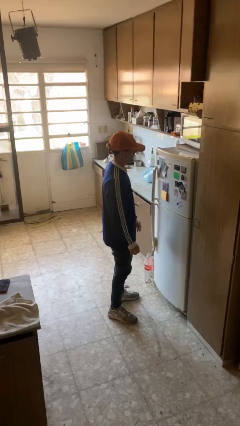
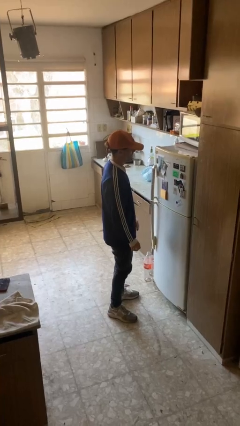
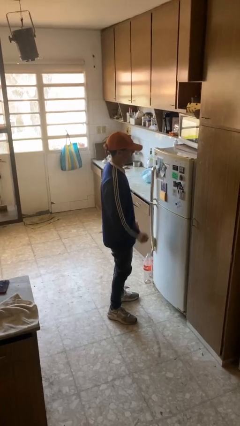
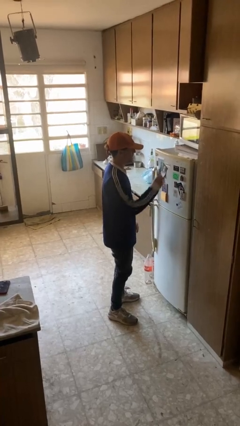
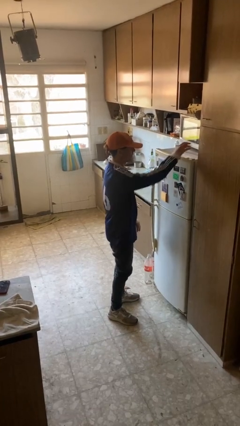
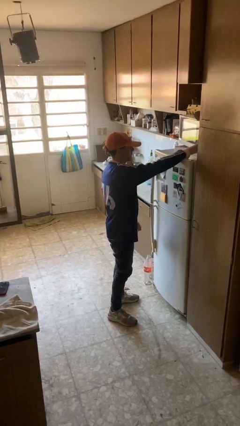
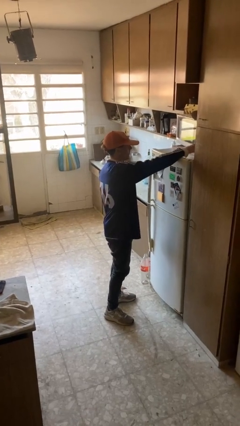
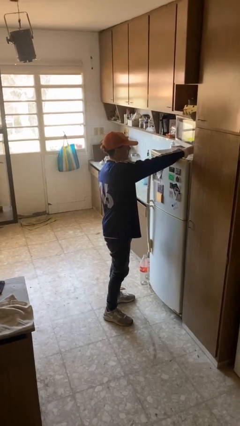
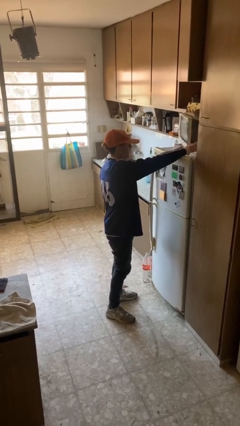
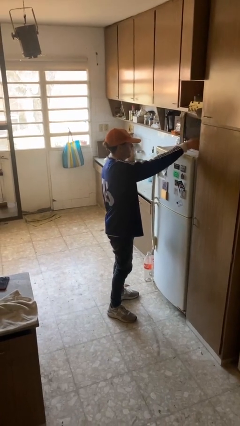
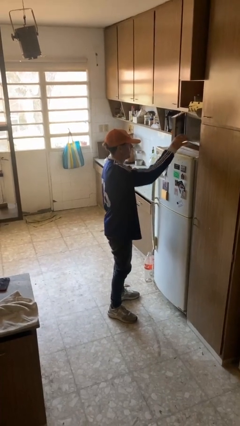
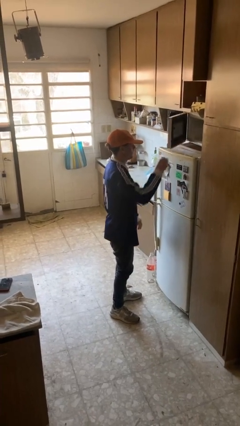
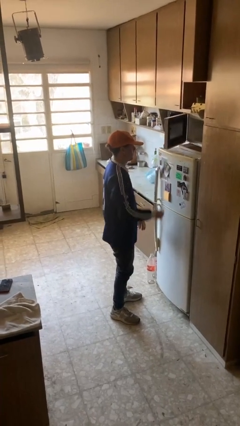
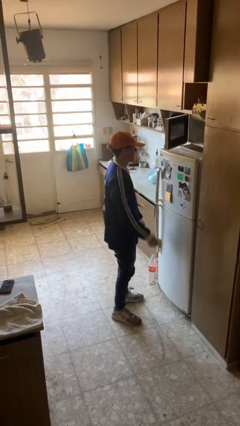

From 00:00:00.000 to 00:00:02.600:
person opens microwave

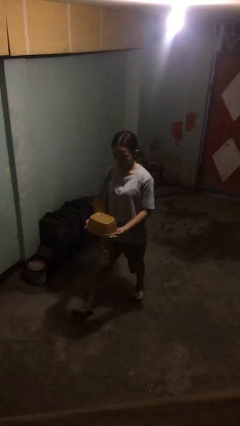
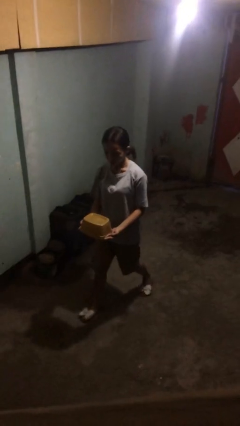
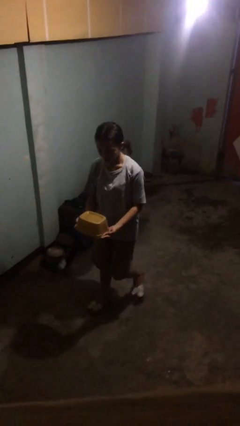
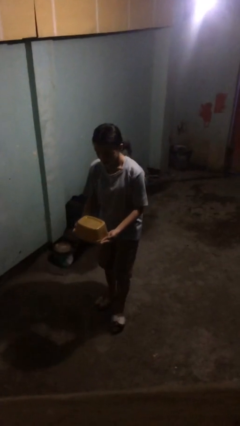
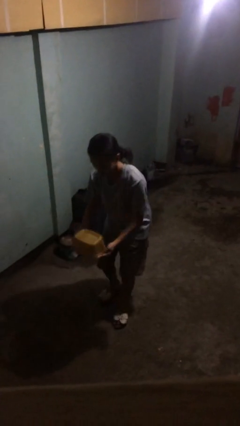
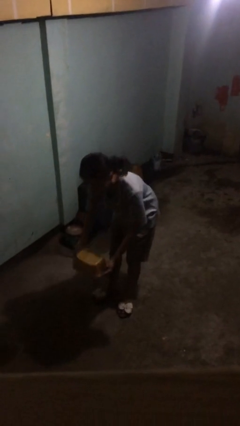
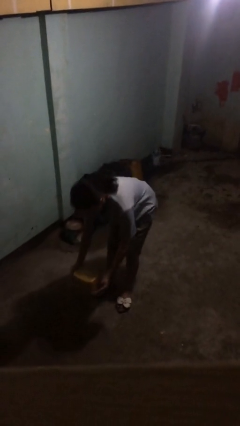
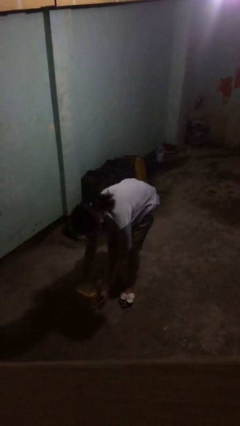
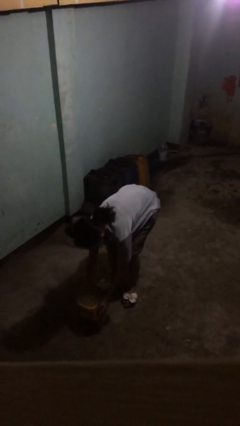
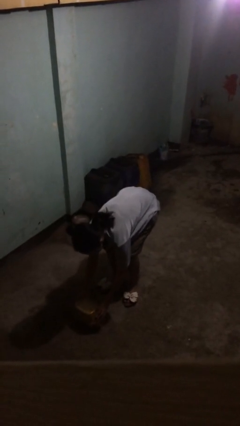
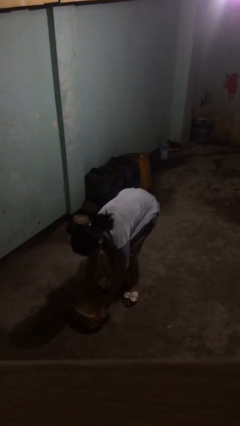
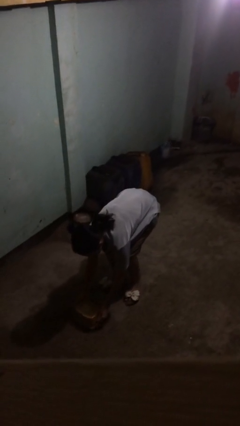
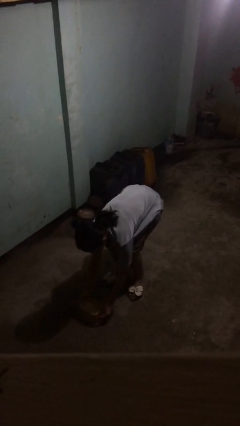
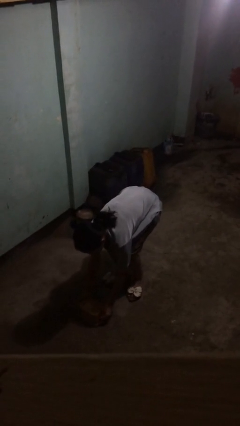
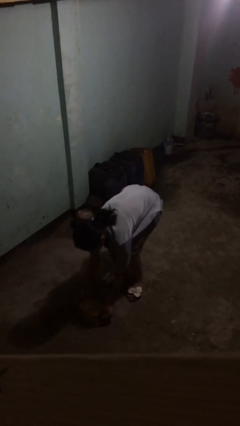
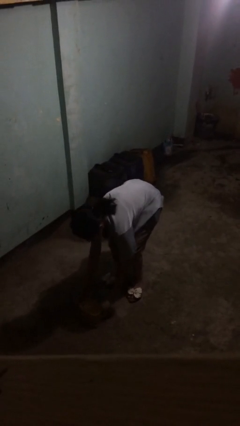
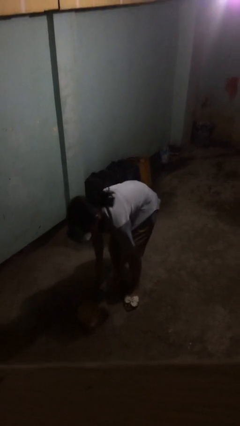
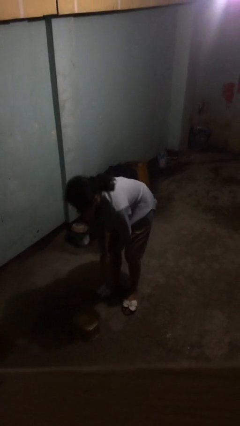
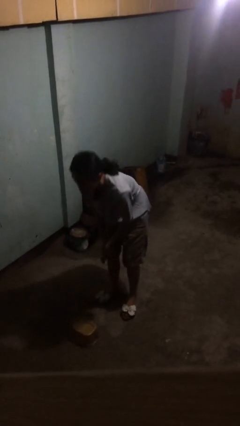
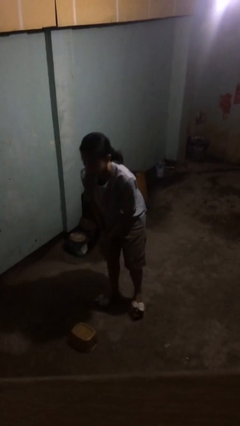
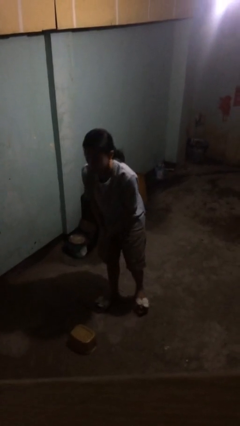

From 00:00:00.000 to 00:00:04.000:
person puts down object on floor

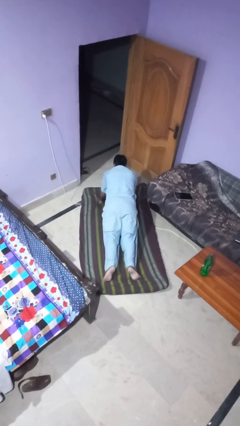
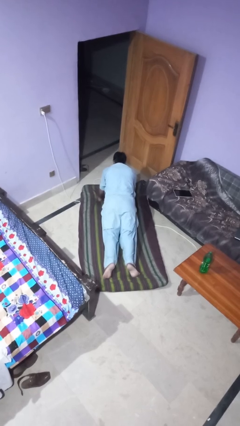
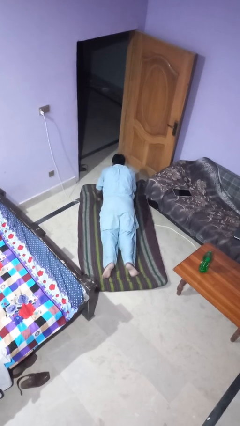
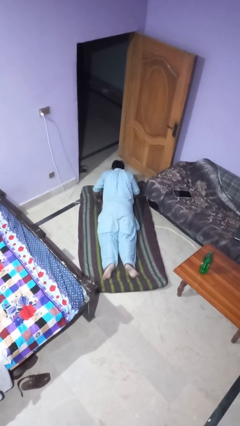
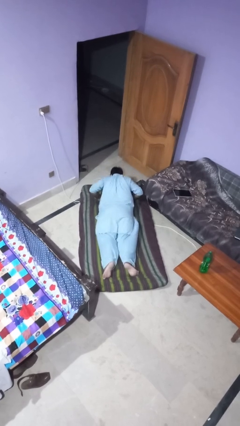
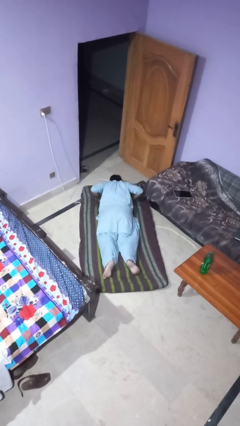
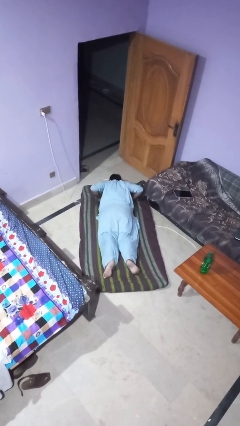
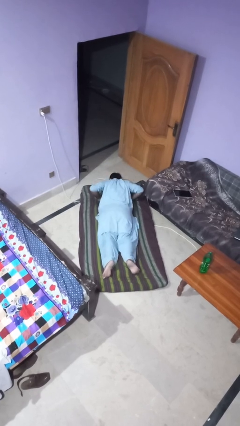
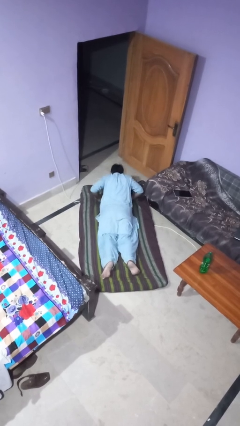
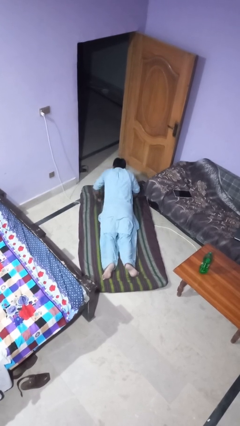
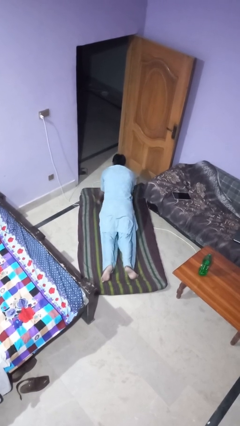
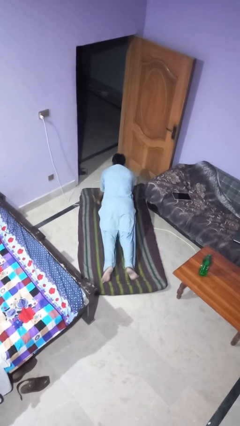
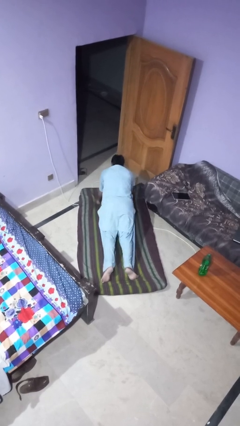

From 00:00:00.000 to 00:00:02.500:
person exercises with pushup

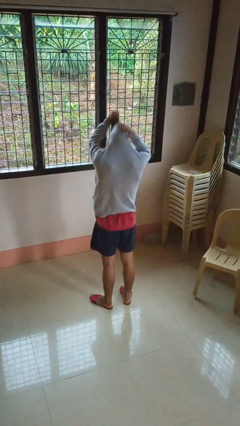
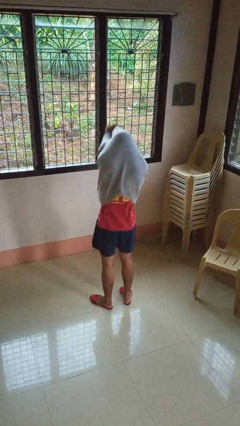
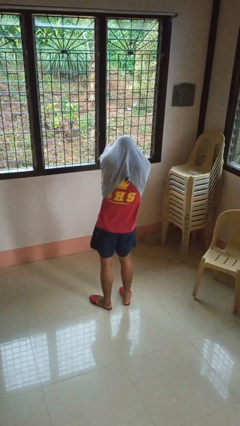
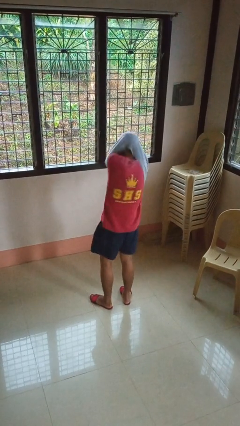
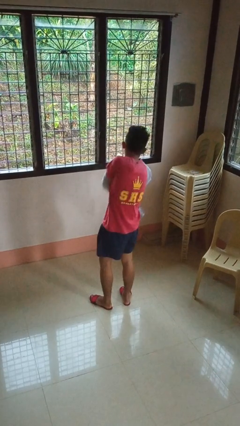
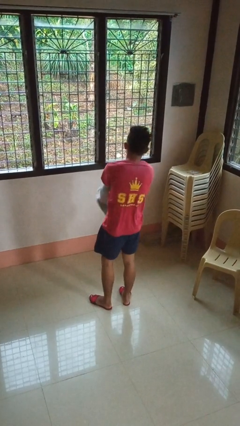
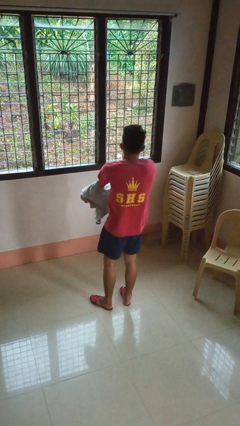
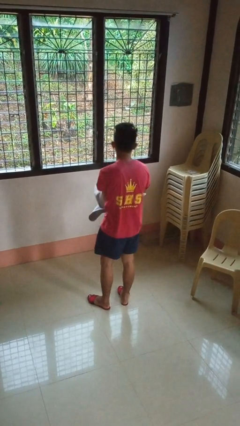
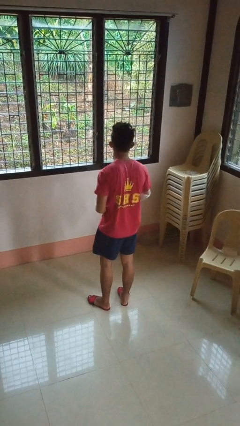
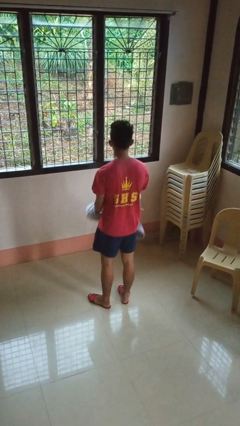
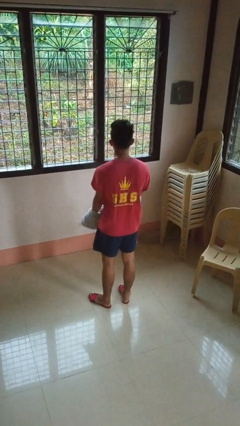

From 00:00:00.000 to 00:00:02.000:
person takes off hoodie

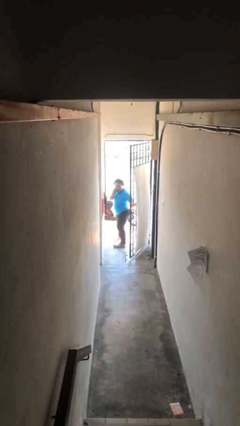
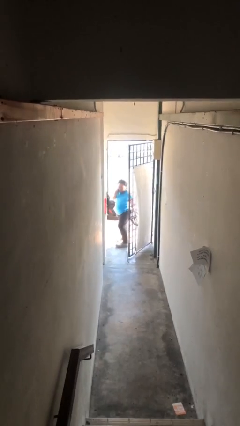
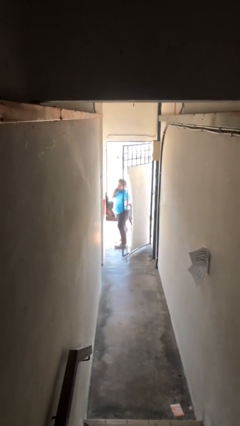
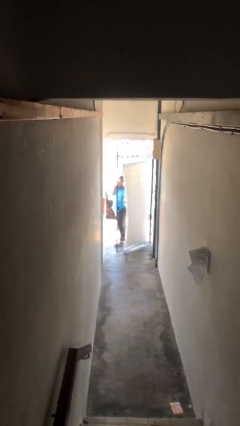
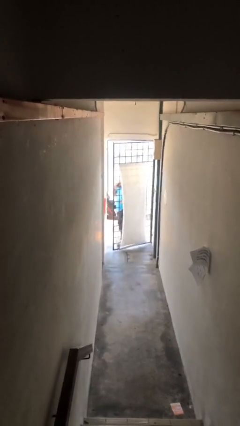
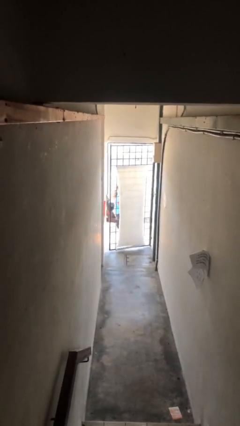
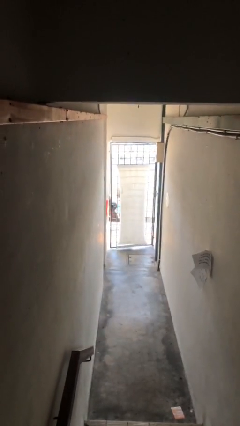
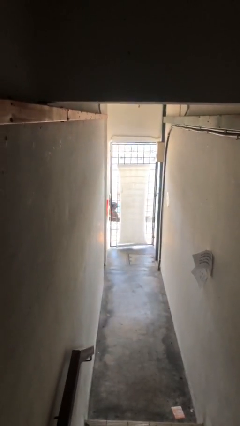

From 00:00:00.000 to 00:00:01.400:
person closes facility door

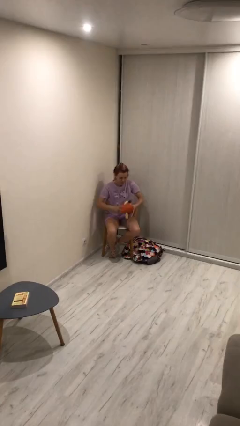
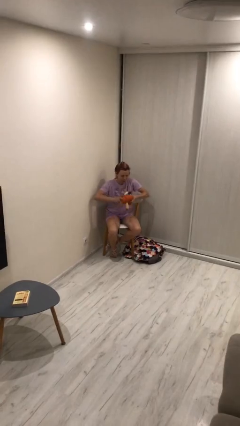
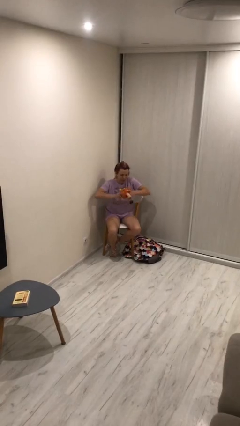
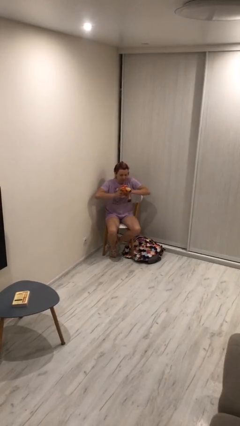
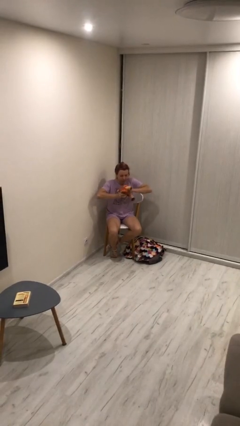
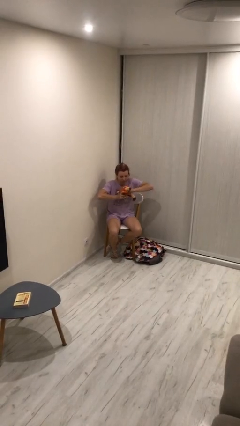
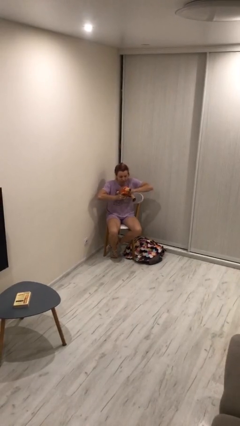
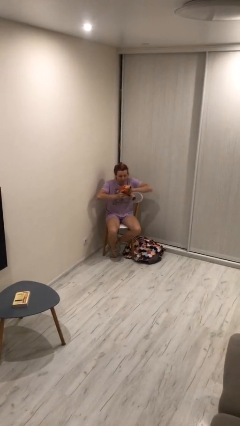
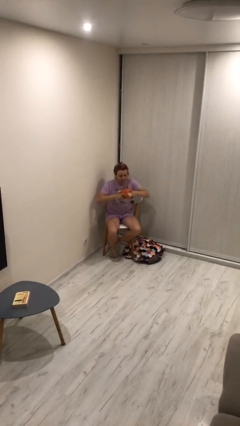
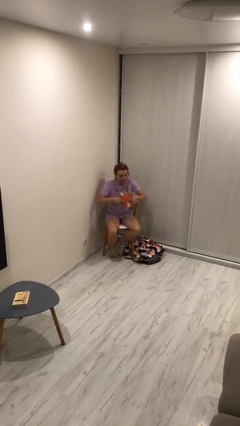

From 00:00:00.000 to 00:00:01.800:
person squeezes object

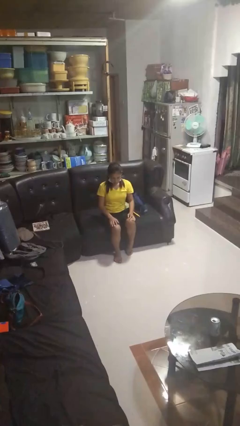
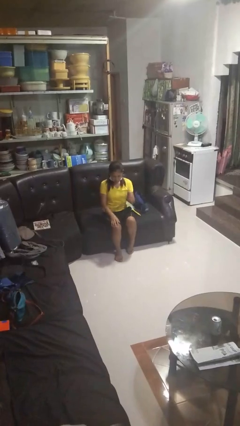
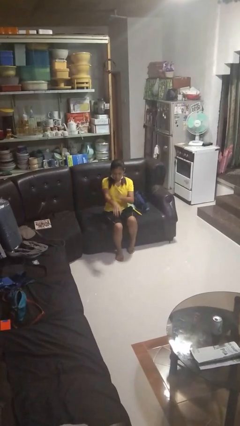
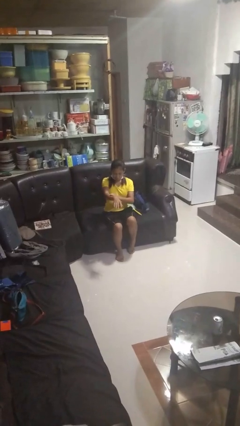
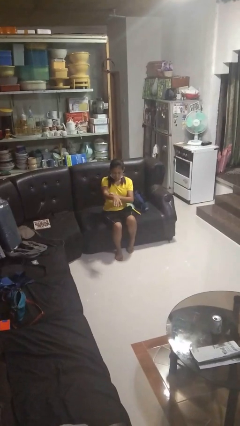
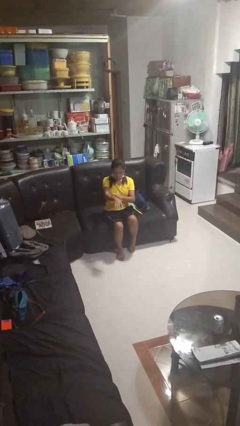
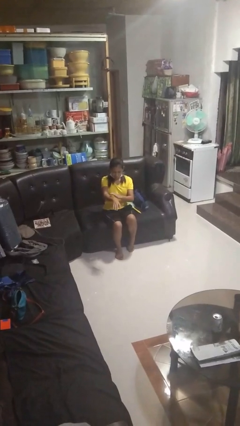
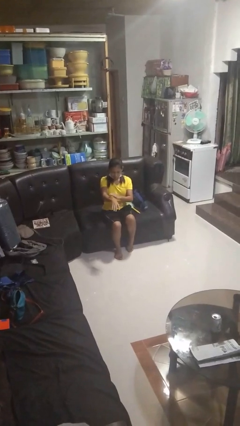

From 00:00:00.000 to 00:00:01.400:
person swats bug

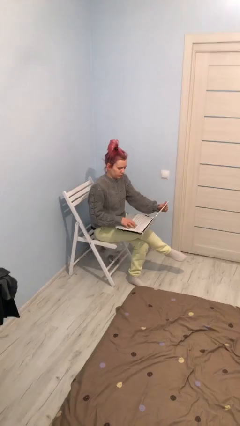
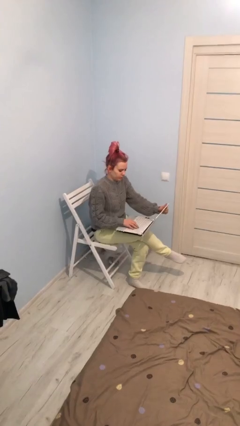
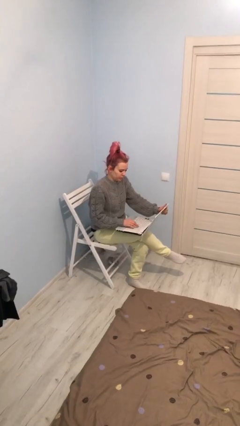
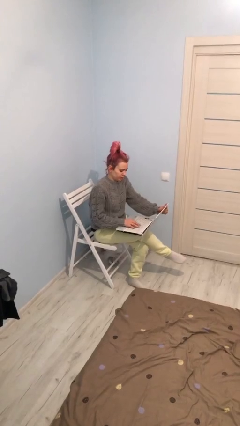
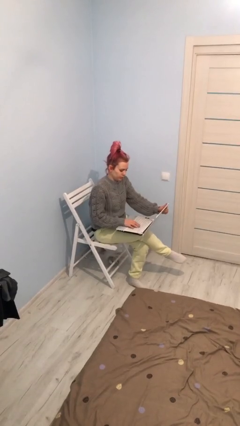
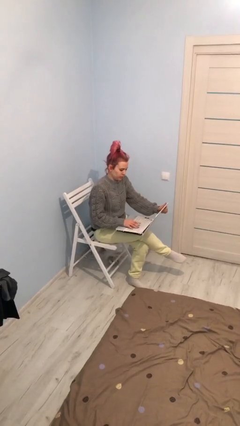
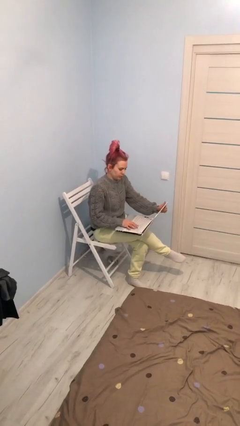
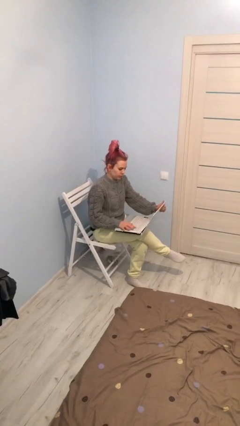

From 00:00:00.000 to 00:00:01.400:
person interacts with laptop
